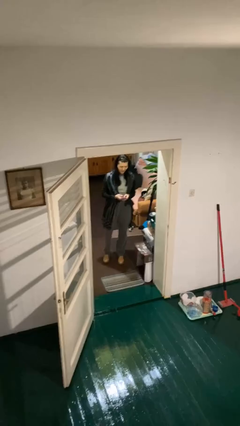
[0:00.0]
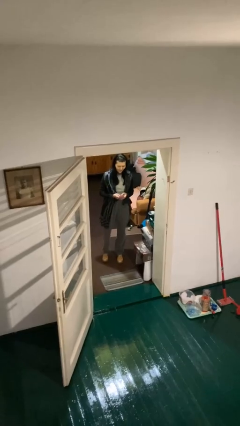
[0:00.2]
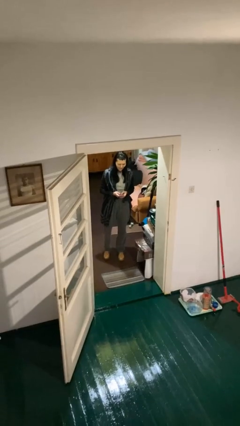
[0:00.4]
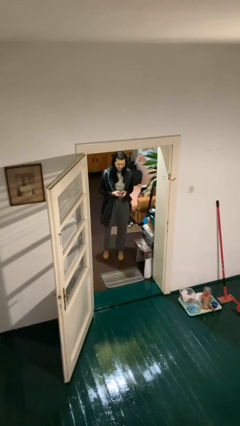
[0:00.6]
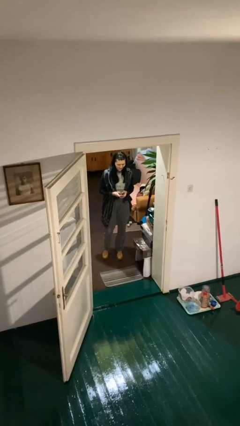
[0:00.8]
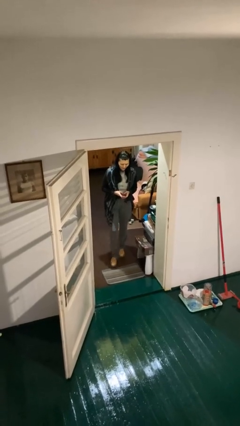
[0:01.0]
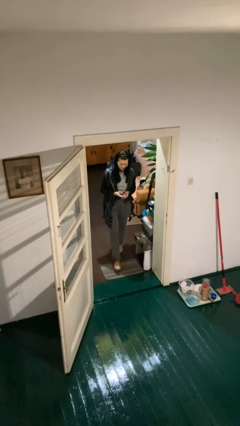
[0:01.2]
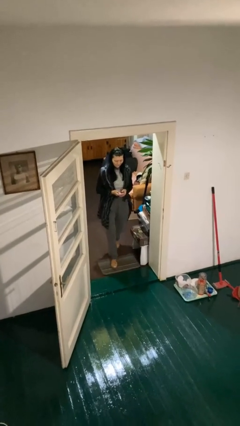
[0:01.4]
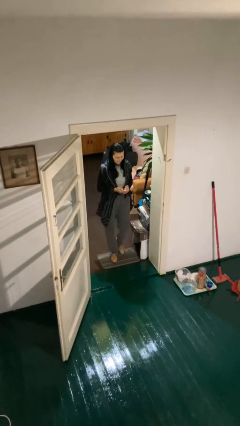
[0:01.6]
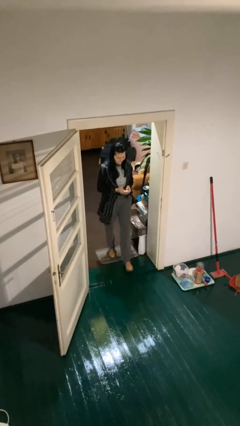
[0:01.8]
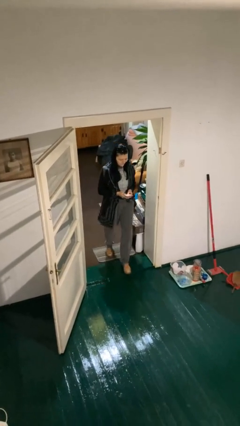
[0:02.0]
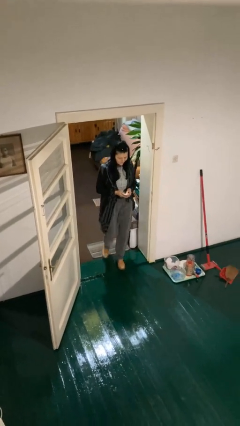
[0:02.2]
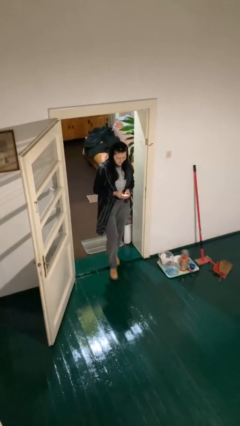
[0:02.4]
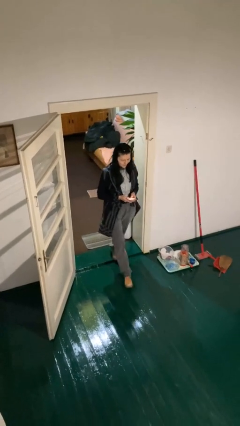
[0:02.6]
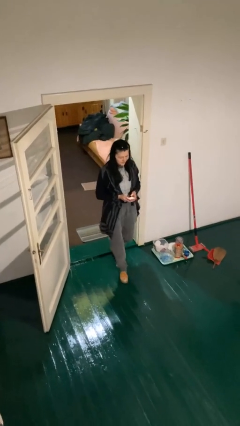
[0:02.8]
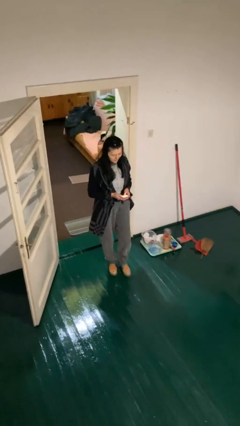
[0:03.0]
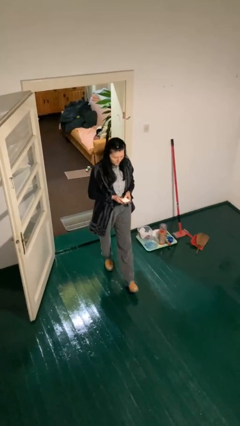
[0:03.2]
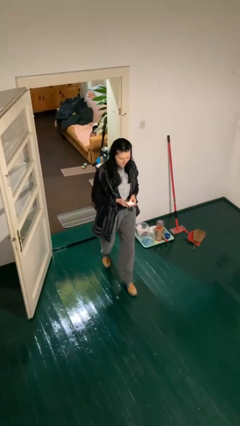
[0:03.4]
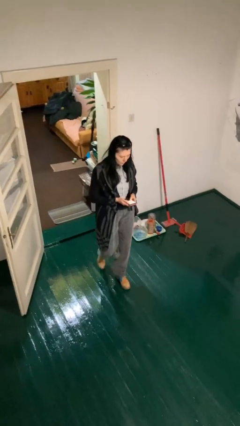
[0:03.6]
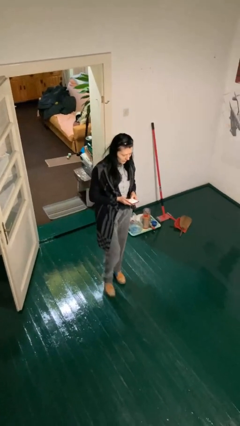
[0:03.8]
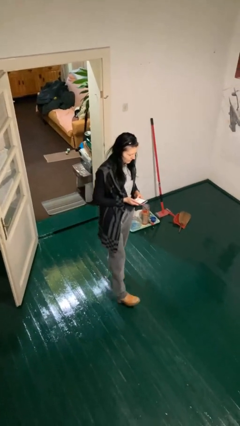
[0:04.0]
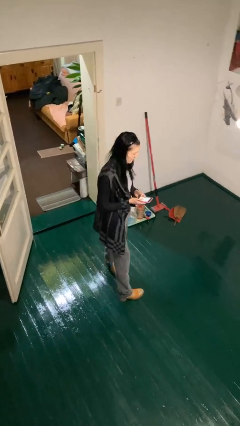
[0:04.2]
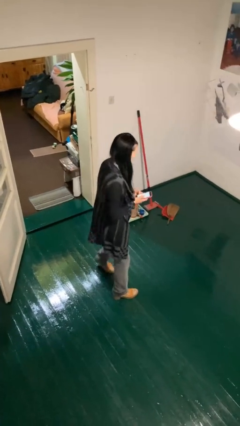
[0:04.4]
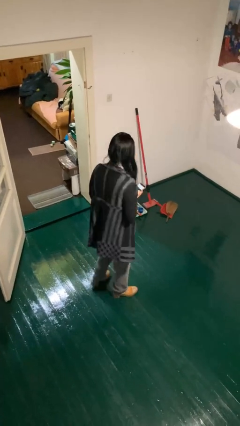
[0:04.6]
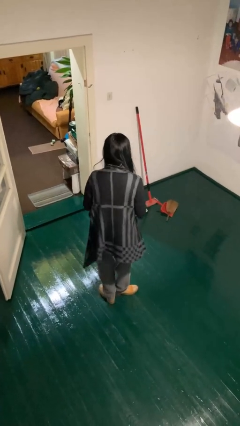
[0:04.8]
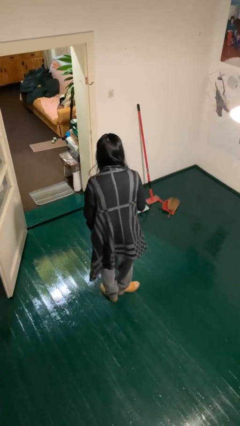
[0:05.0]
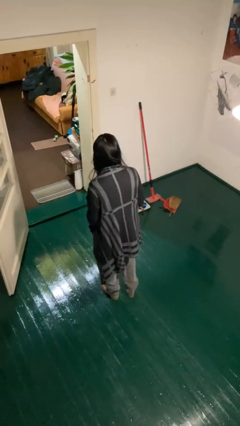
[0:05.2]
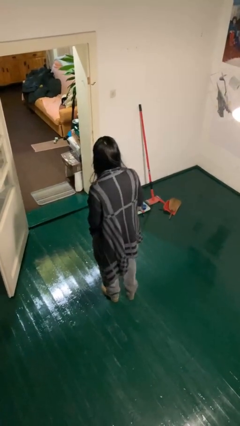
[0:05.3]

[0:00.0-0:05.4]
person enters scene through structure

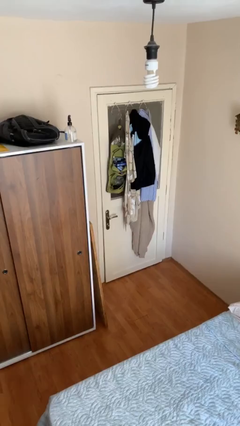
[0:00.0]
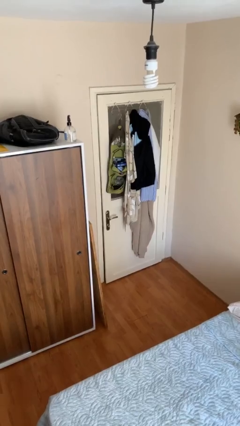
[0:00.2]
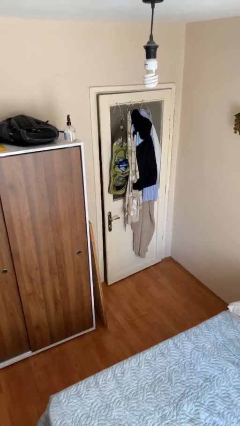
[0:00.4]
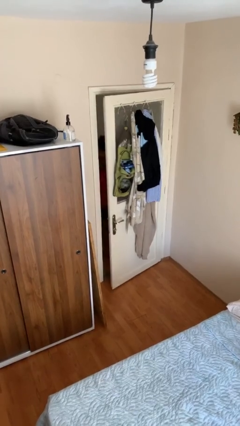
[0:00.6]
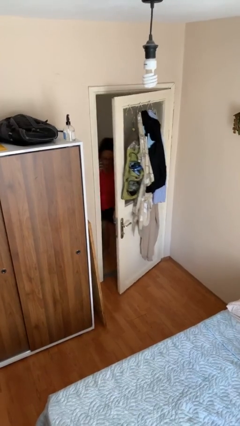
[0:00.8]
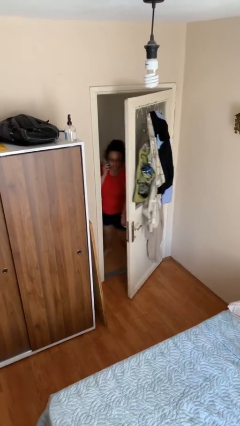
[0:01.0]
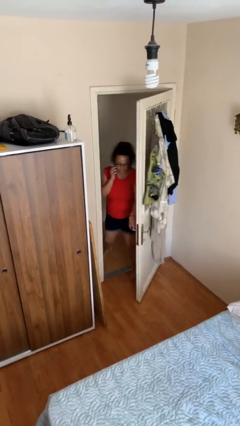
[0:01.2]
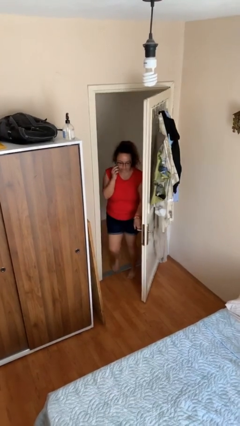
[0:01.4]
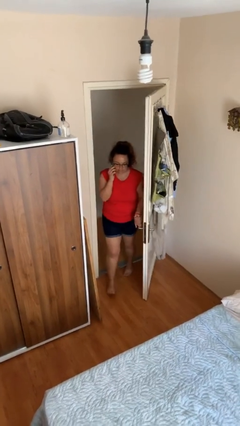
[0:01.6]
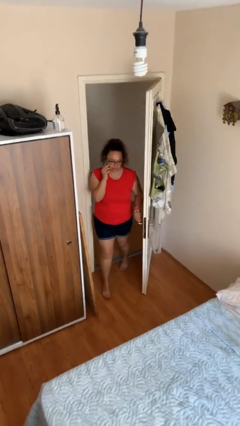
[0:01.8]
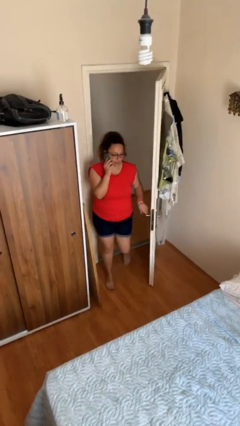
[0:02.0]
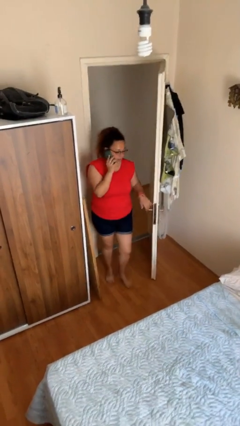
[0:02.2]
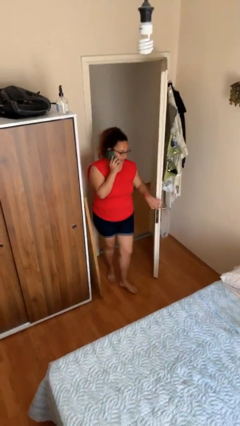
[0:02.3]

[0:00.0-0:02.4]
person opens facility door

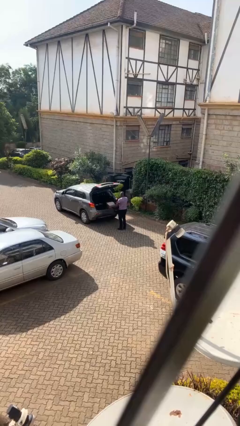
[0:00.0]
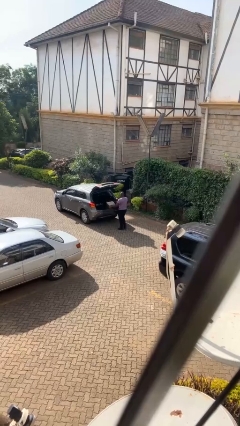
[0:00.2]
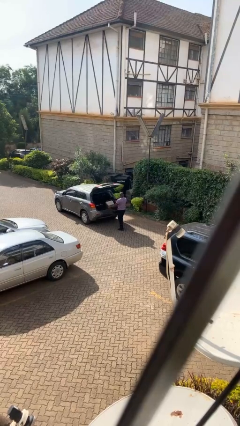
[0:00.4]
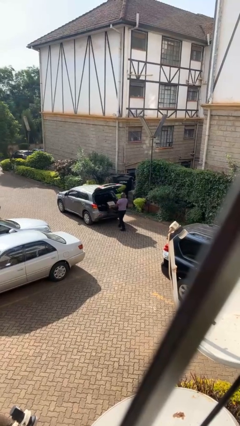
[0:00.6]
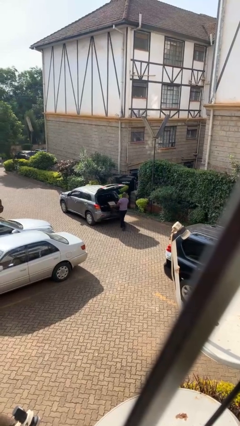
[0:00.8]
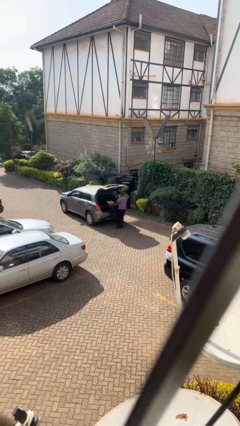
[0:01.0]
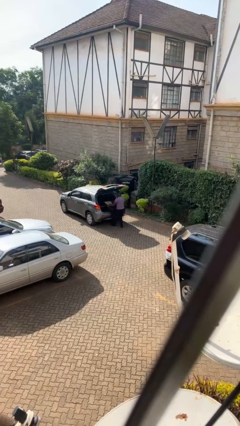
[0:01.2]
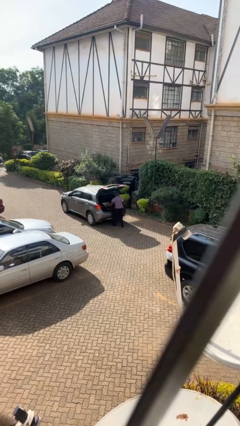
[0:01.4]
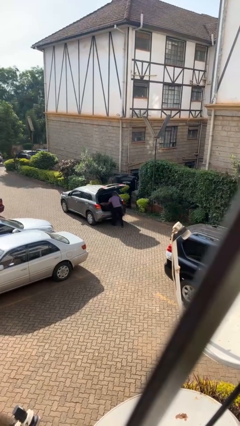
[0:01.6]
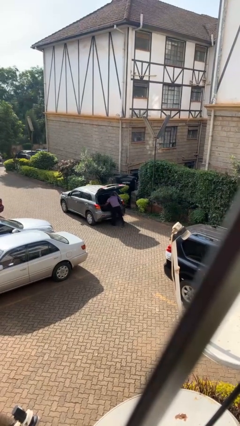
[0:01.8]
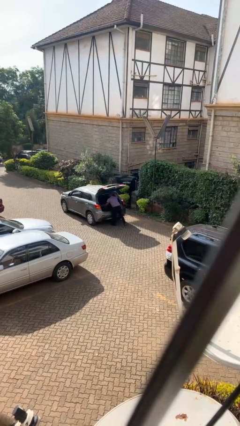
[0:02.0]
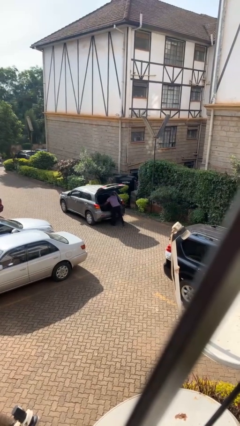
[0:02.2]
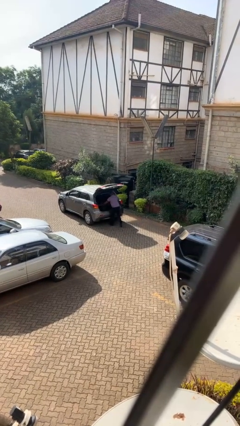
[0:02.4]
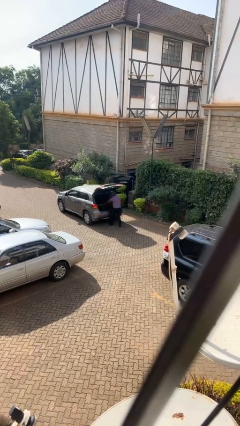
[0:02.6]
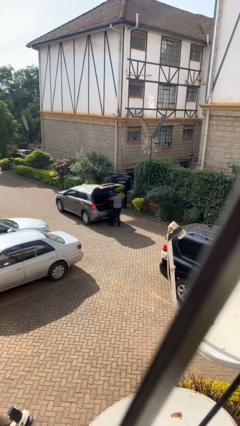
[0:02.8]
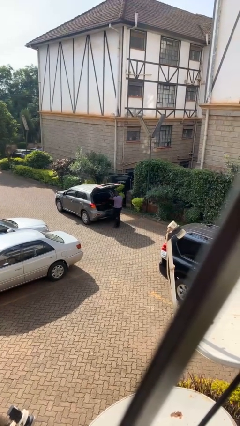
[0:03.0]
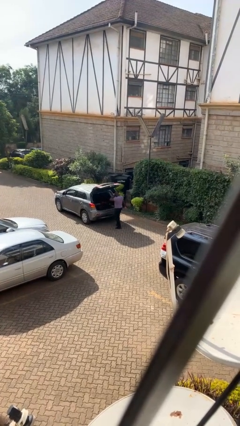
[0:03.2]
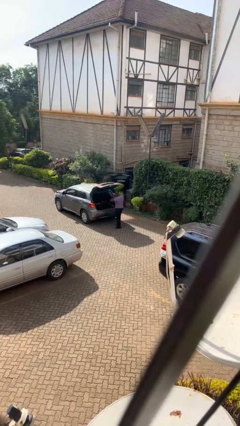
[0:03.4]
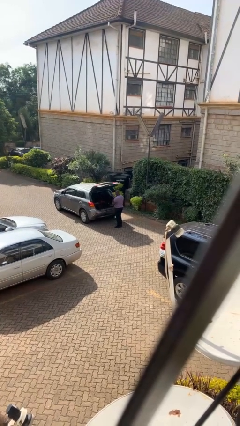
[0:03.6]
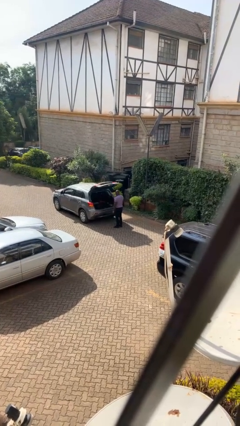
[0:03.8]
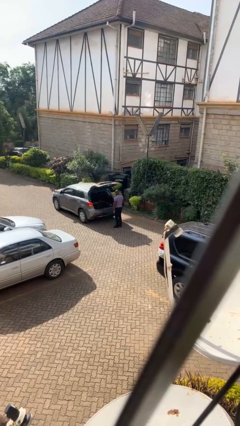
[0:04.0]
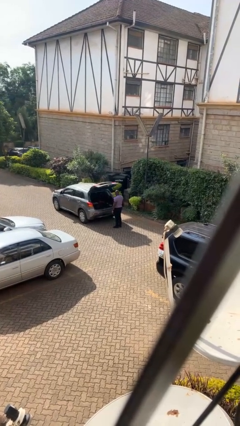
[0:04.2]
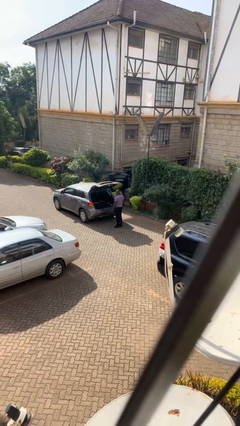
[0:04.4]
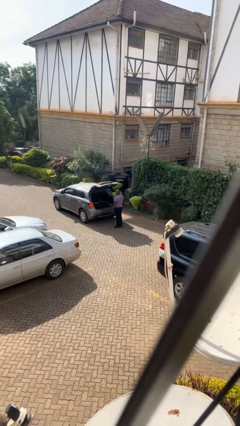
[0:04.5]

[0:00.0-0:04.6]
person loads car

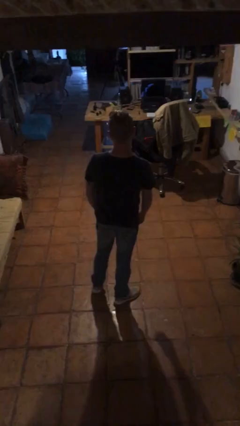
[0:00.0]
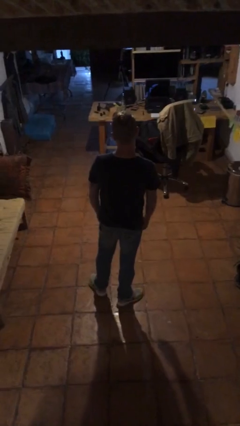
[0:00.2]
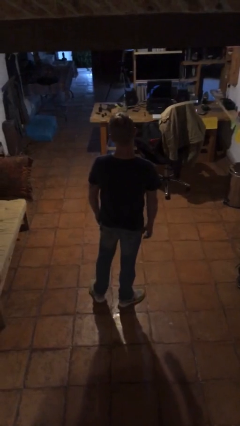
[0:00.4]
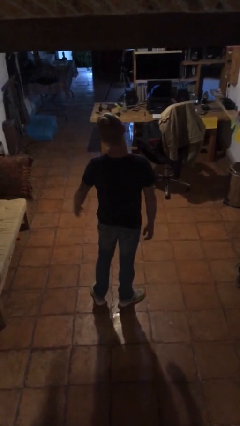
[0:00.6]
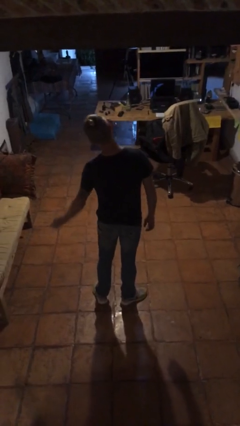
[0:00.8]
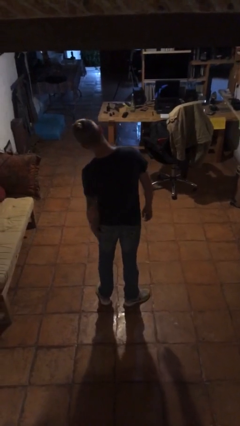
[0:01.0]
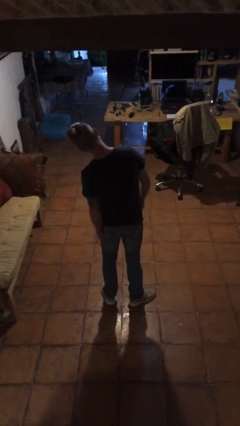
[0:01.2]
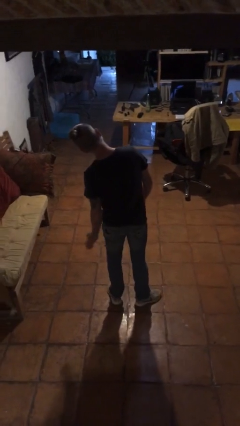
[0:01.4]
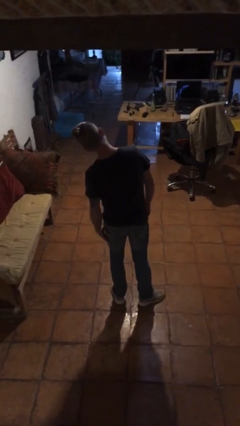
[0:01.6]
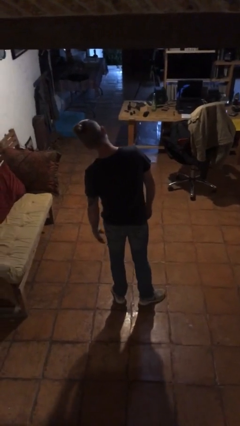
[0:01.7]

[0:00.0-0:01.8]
person slaps hands on thighs

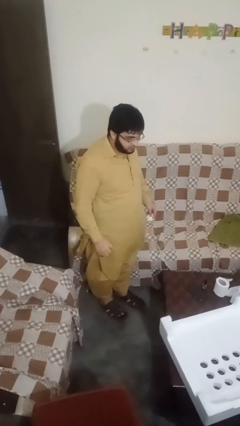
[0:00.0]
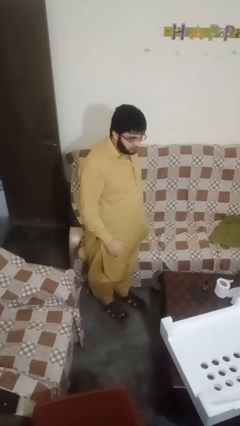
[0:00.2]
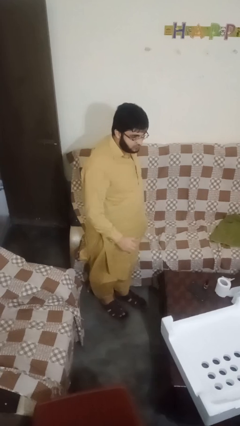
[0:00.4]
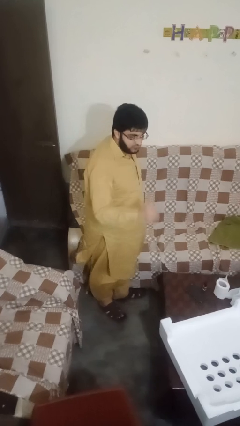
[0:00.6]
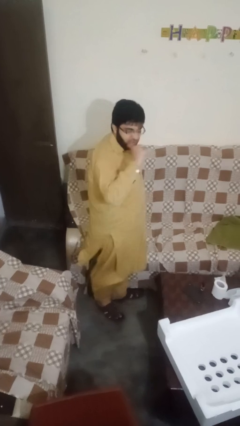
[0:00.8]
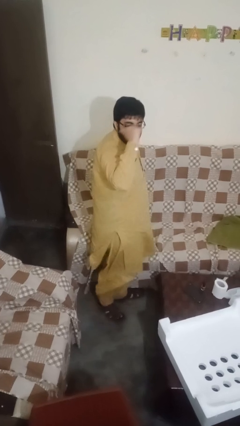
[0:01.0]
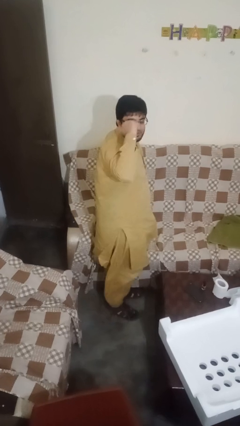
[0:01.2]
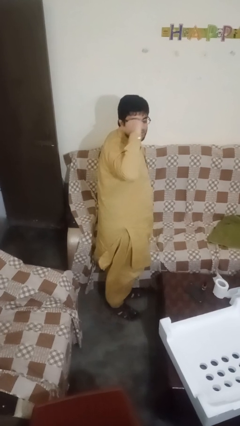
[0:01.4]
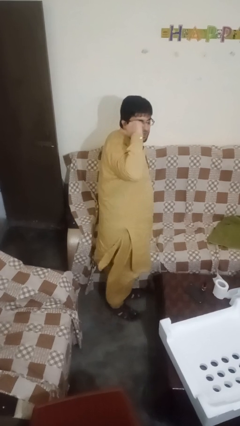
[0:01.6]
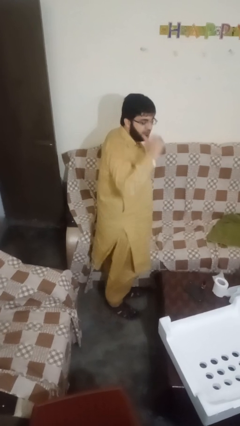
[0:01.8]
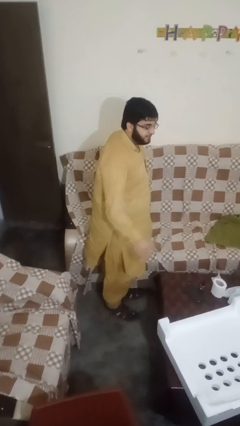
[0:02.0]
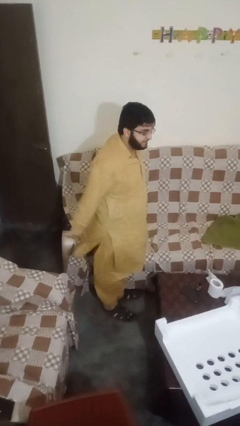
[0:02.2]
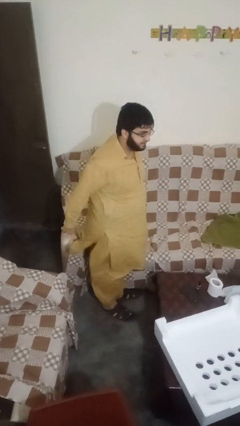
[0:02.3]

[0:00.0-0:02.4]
person gestures behind me

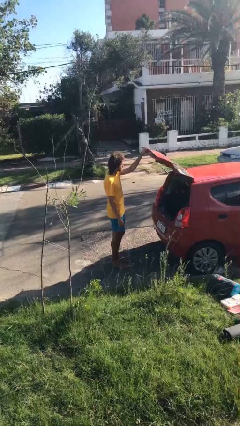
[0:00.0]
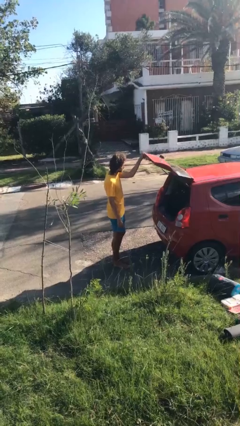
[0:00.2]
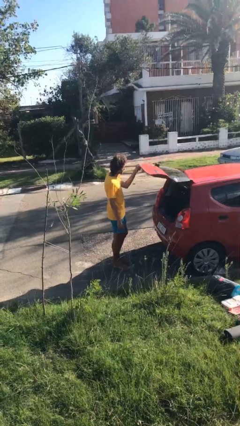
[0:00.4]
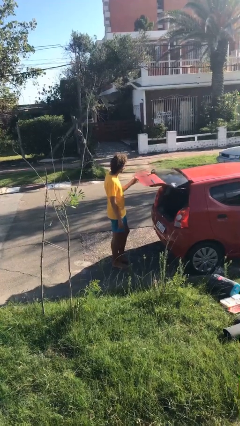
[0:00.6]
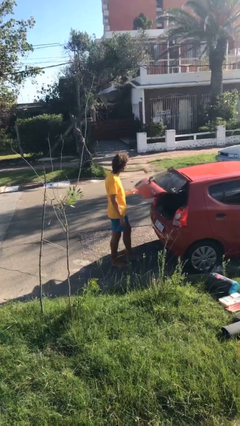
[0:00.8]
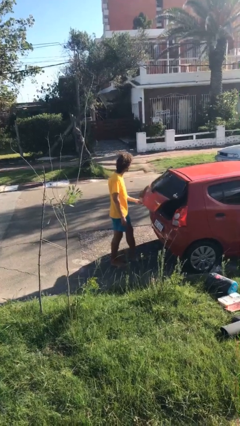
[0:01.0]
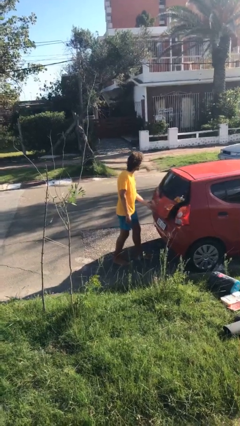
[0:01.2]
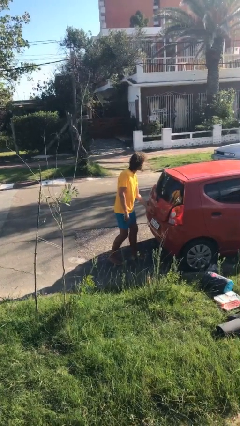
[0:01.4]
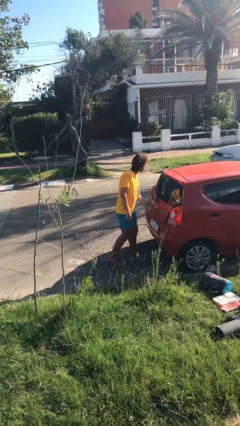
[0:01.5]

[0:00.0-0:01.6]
person closes car trunk
